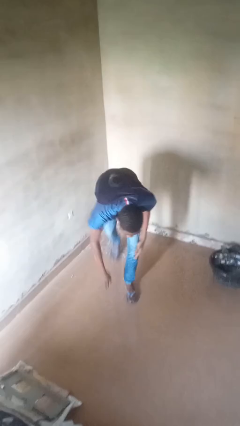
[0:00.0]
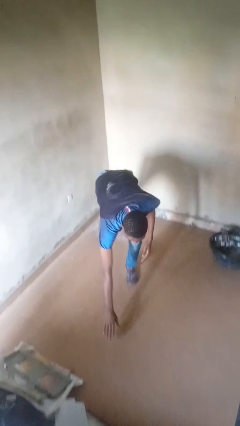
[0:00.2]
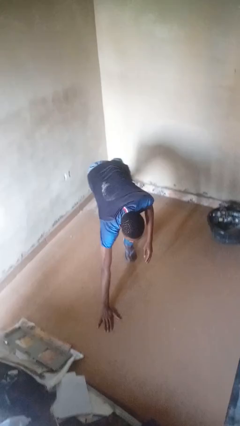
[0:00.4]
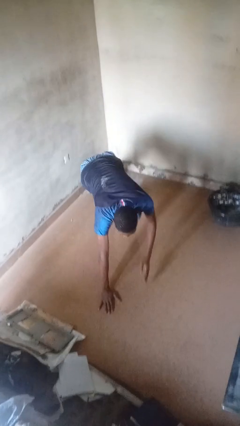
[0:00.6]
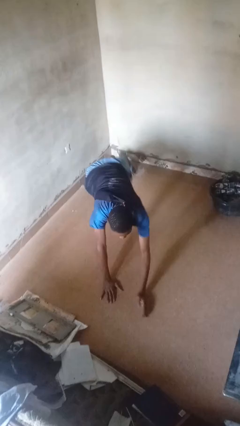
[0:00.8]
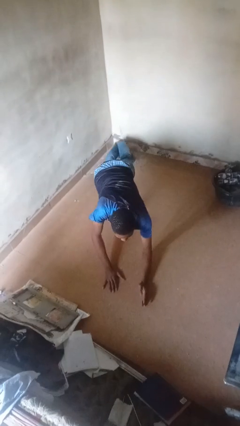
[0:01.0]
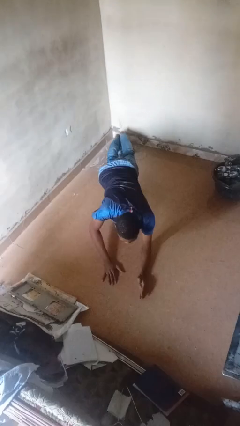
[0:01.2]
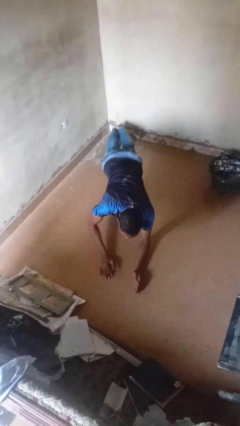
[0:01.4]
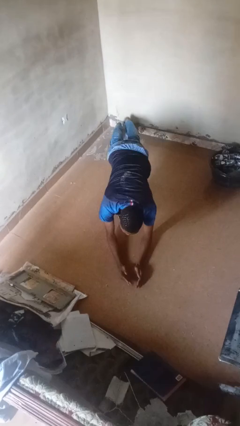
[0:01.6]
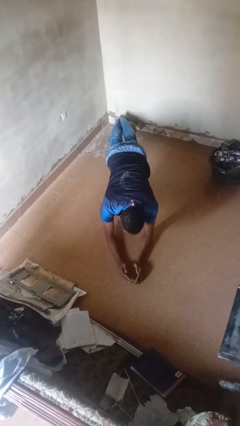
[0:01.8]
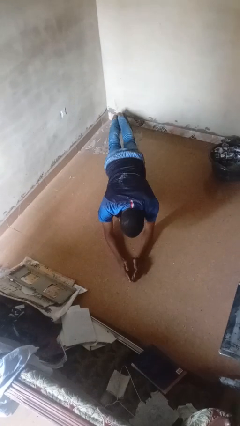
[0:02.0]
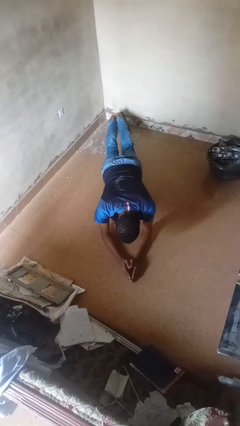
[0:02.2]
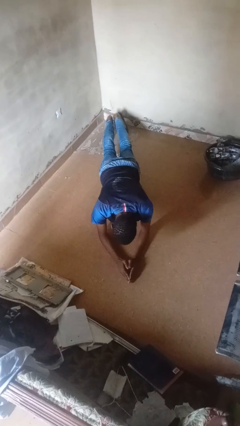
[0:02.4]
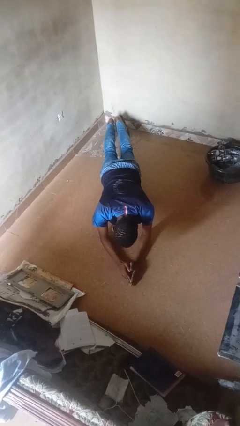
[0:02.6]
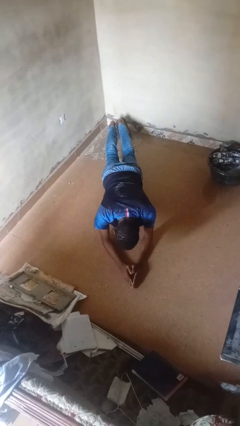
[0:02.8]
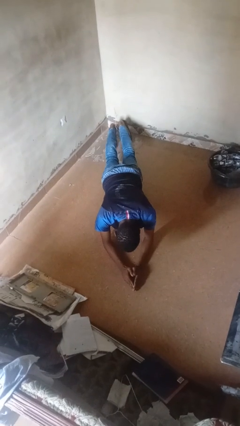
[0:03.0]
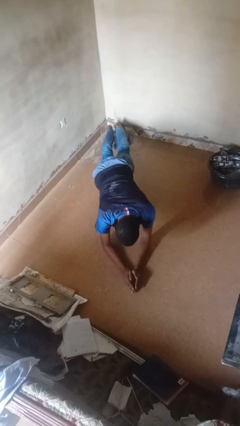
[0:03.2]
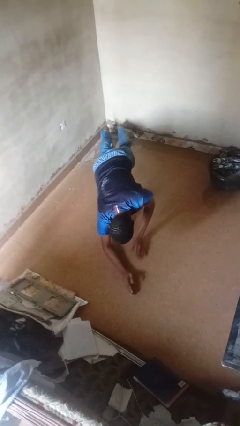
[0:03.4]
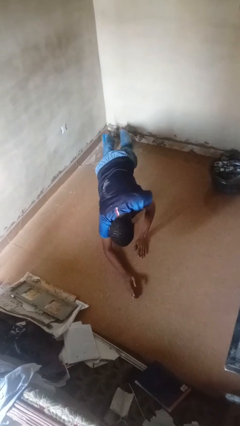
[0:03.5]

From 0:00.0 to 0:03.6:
person exercises with plank

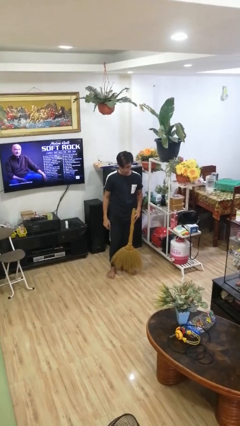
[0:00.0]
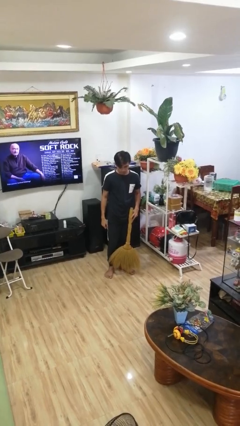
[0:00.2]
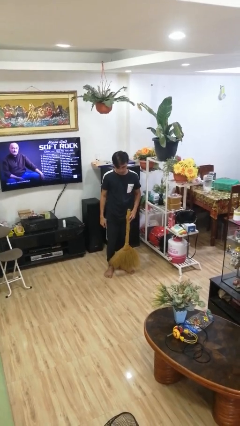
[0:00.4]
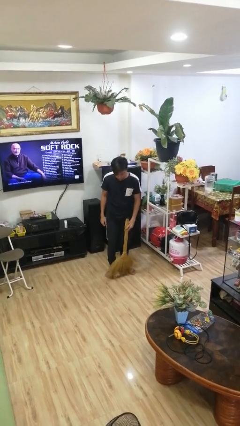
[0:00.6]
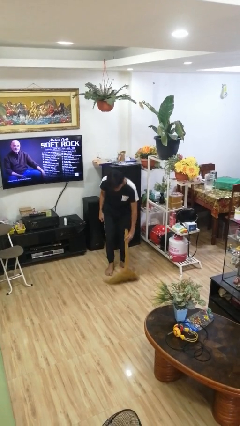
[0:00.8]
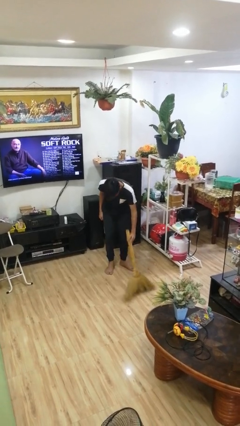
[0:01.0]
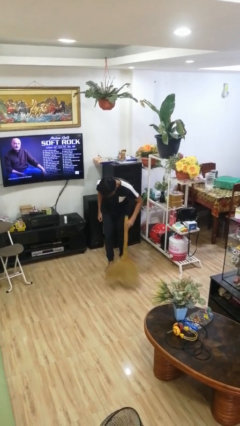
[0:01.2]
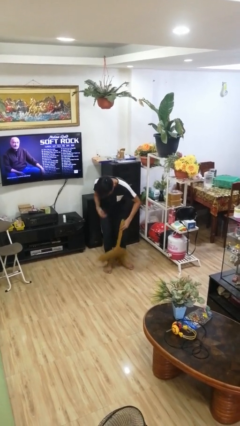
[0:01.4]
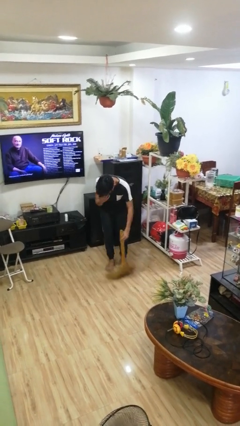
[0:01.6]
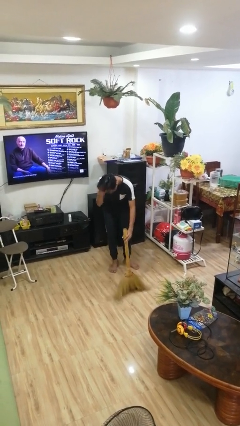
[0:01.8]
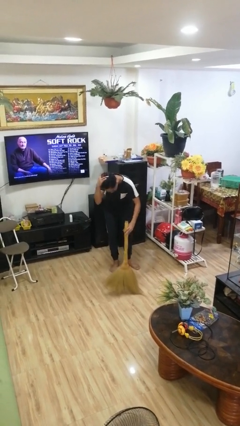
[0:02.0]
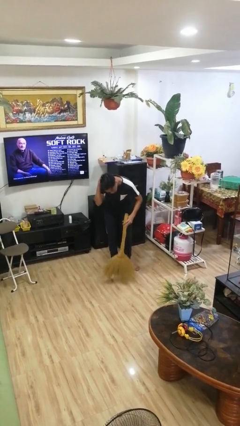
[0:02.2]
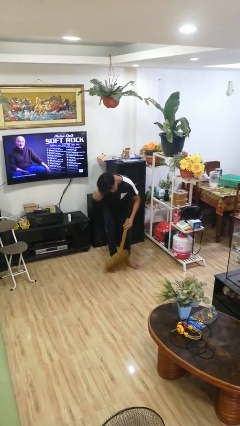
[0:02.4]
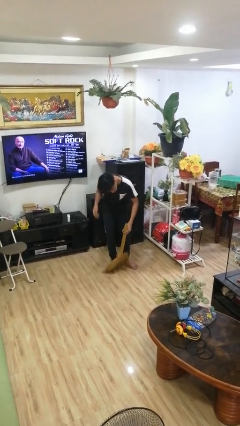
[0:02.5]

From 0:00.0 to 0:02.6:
person sweeps floor

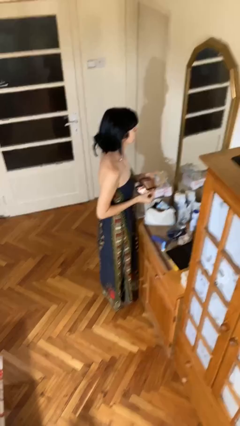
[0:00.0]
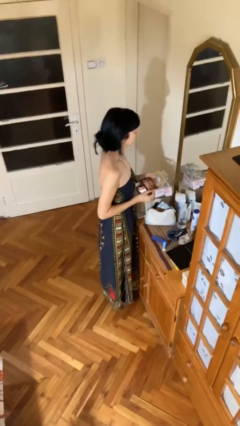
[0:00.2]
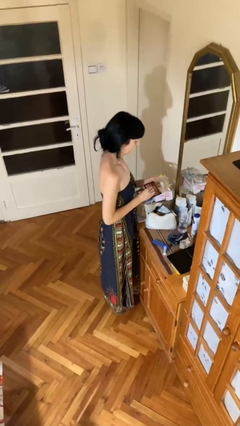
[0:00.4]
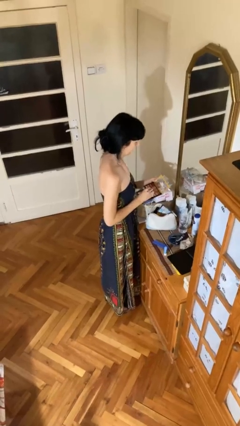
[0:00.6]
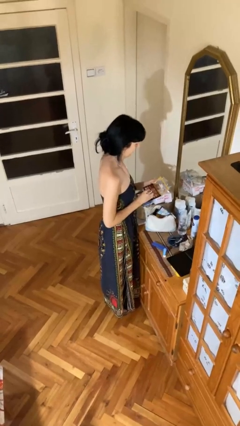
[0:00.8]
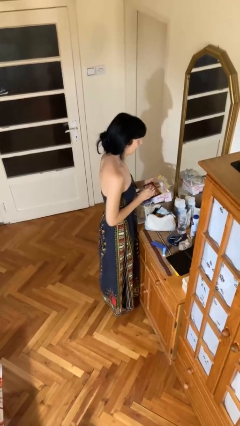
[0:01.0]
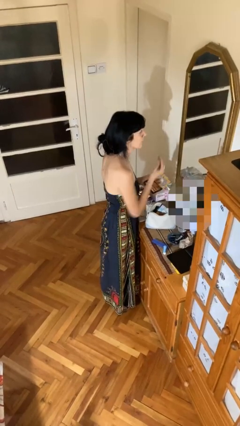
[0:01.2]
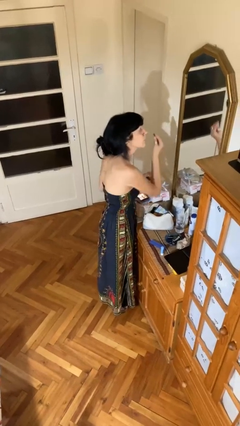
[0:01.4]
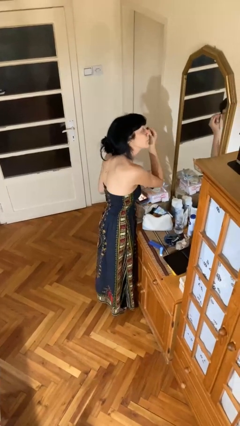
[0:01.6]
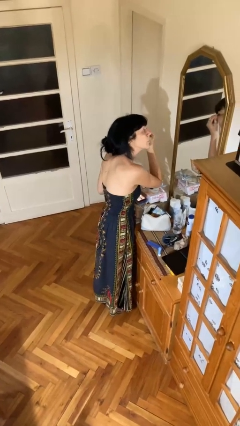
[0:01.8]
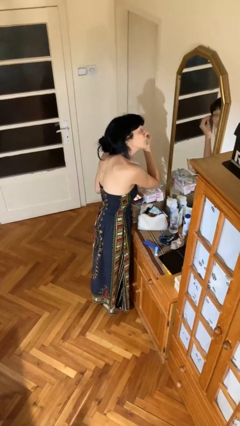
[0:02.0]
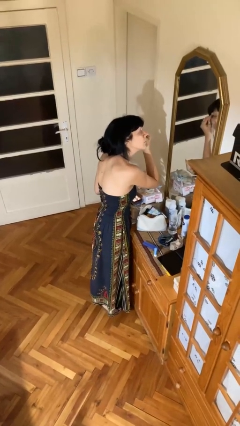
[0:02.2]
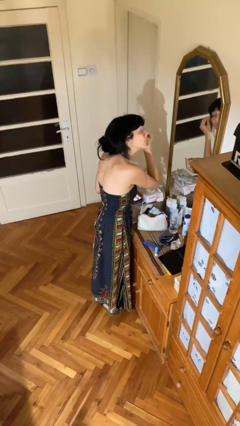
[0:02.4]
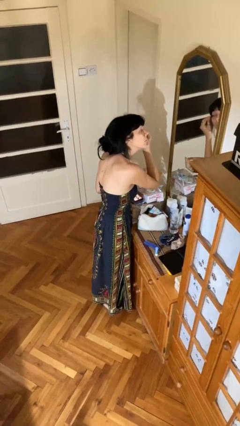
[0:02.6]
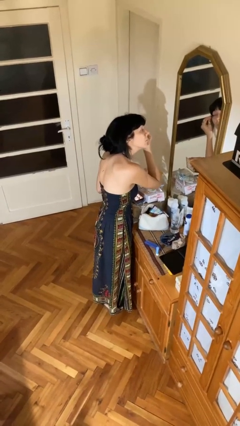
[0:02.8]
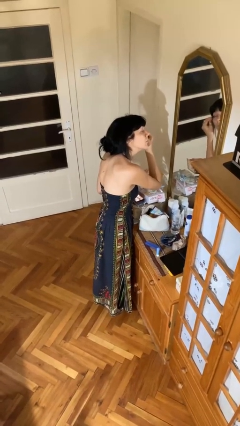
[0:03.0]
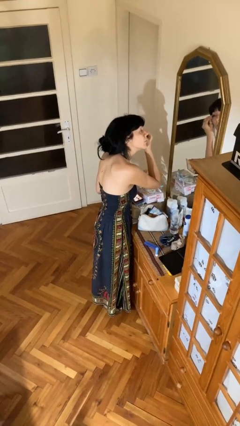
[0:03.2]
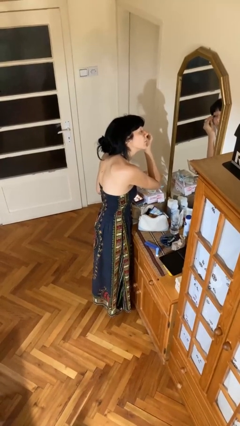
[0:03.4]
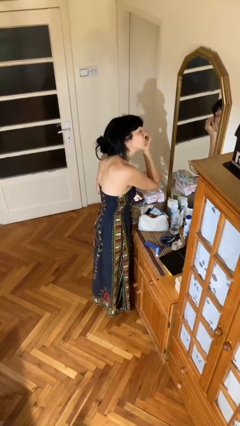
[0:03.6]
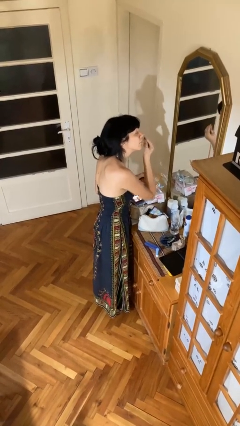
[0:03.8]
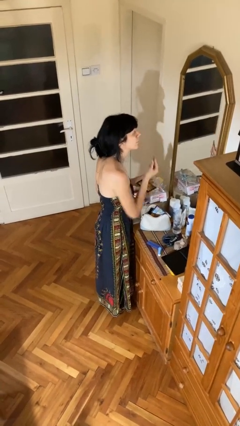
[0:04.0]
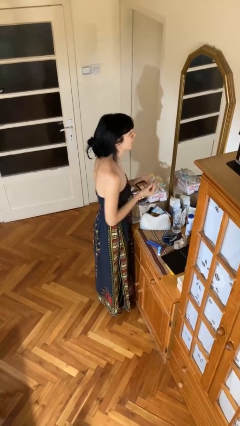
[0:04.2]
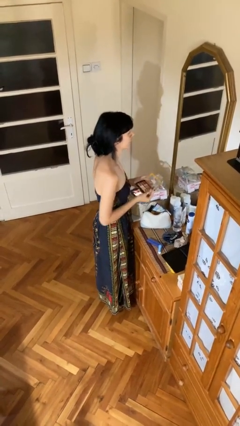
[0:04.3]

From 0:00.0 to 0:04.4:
person applies eye makeup

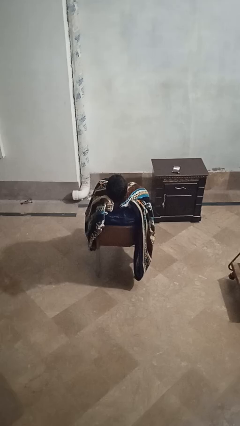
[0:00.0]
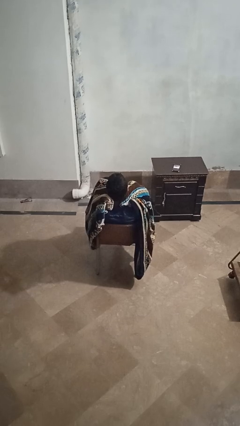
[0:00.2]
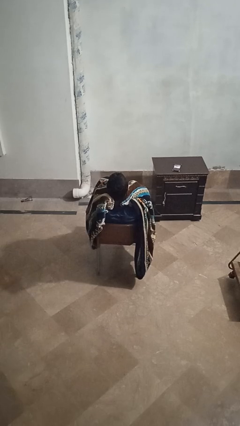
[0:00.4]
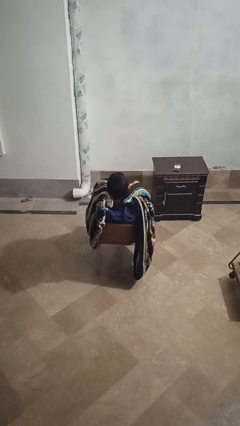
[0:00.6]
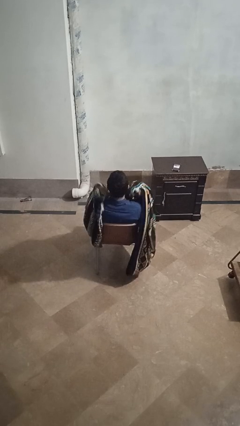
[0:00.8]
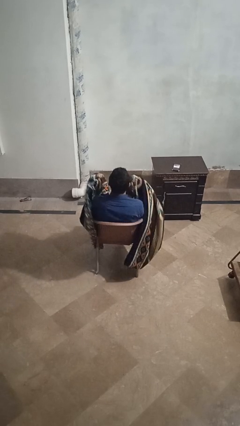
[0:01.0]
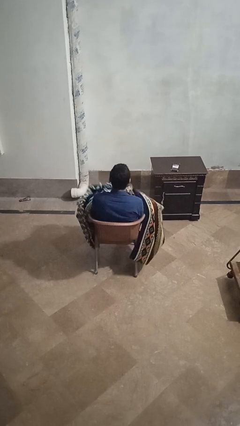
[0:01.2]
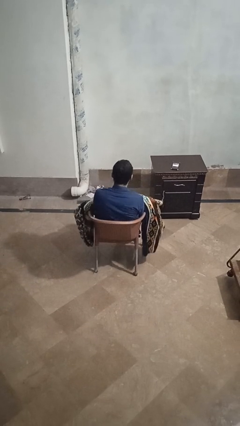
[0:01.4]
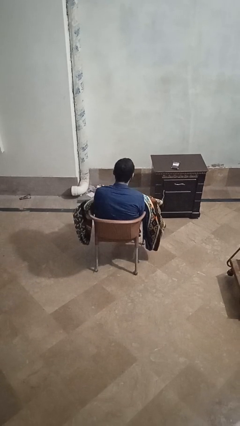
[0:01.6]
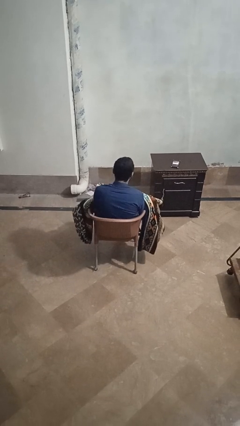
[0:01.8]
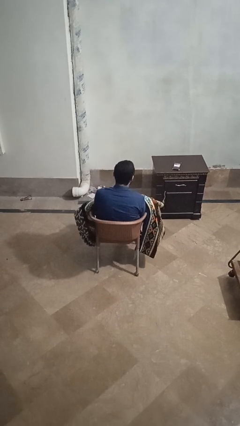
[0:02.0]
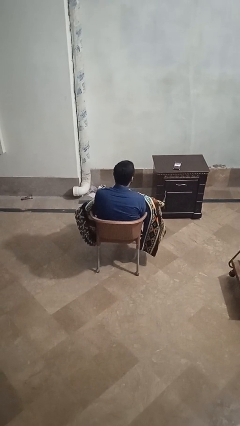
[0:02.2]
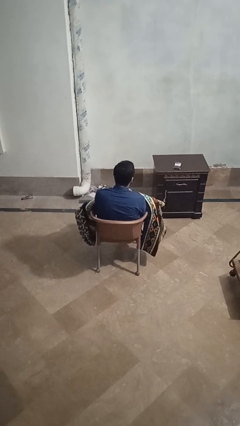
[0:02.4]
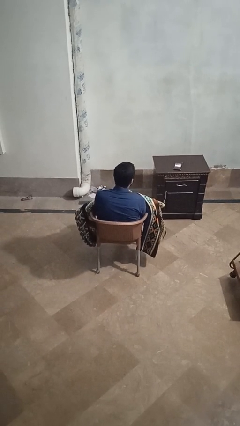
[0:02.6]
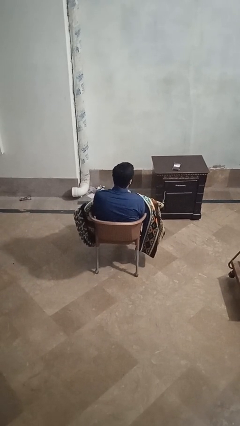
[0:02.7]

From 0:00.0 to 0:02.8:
person uncovers with blanket

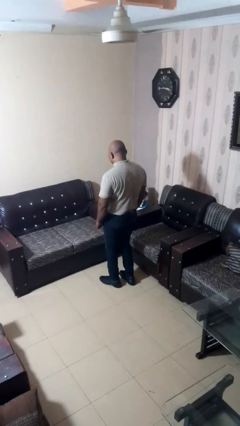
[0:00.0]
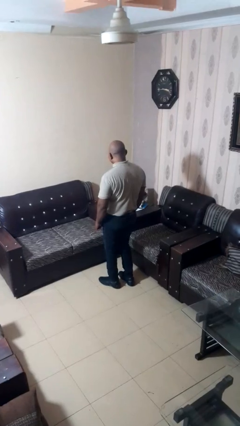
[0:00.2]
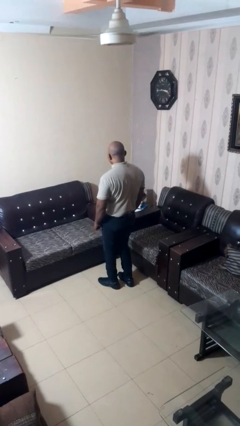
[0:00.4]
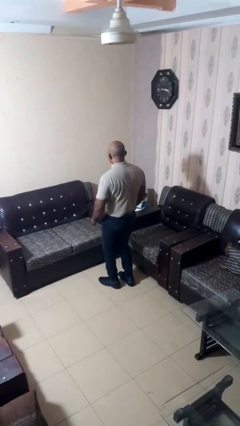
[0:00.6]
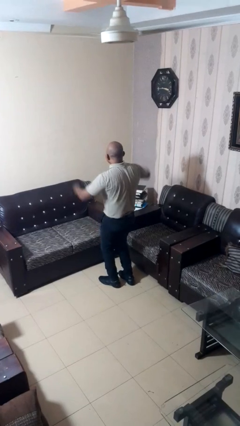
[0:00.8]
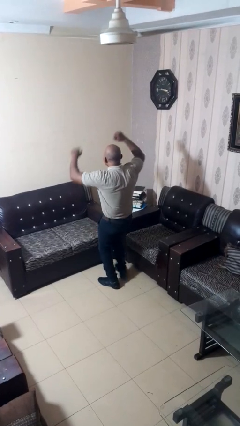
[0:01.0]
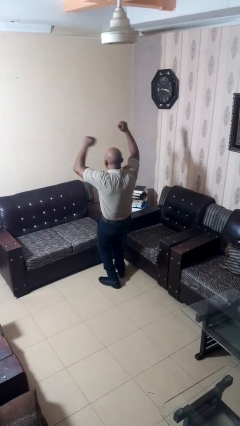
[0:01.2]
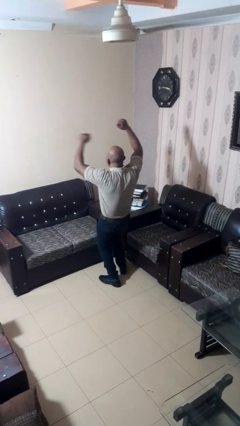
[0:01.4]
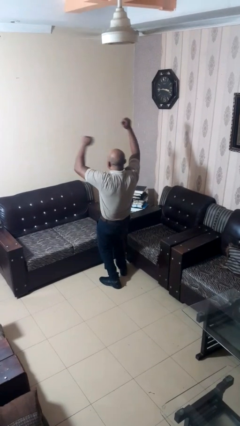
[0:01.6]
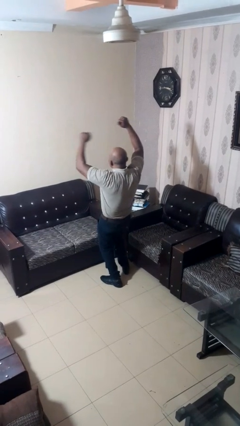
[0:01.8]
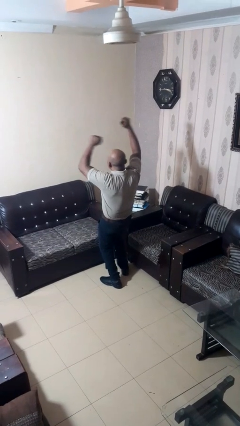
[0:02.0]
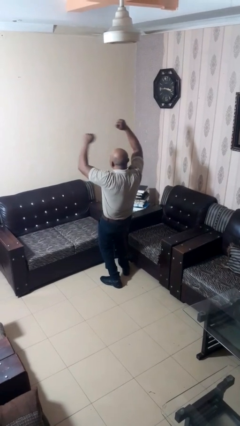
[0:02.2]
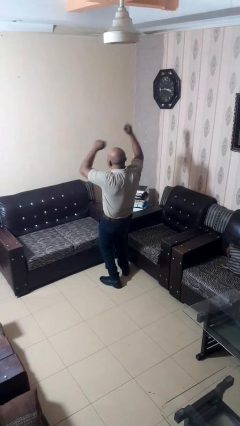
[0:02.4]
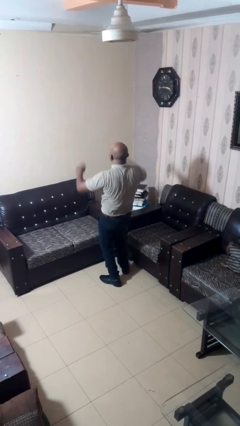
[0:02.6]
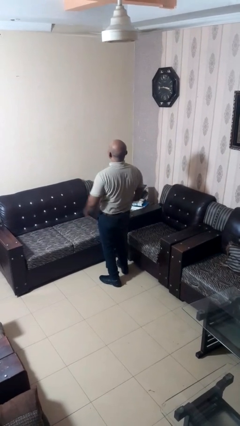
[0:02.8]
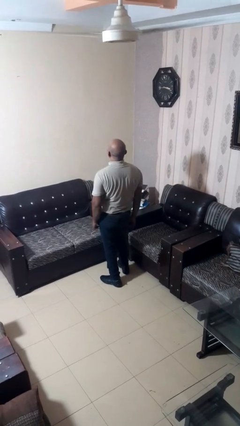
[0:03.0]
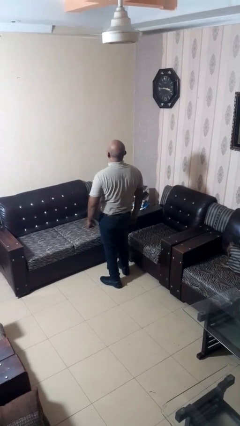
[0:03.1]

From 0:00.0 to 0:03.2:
person dances in place

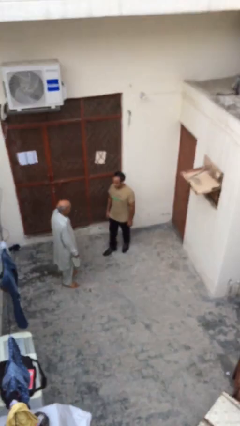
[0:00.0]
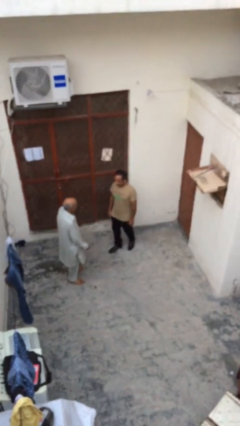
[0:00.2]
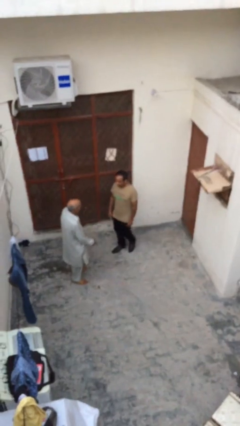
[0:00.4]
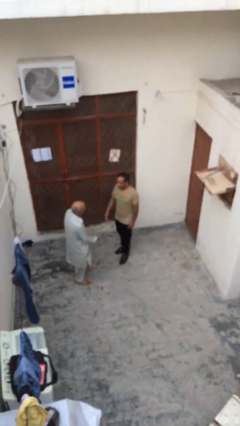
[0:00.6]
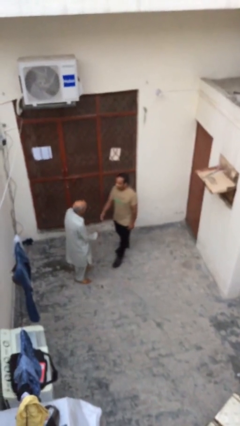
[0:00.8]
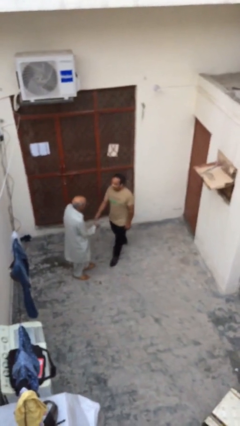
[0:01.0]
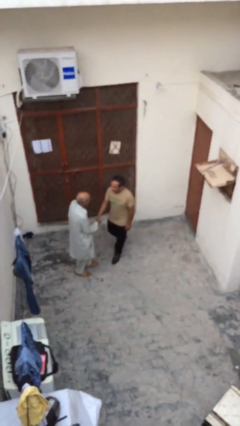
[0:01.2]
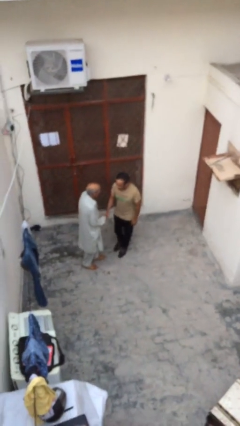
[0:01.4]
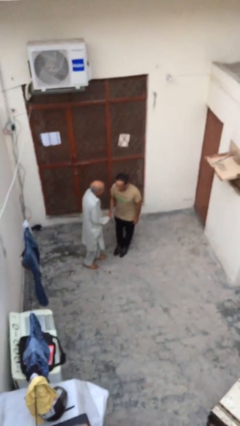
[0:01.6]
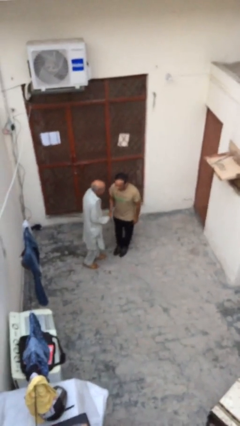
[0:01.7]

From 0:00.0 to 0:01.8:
person shakes hand
